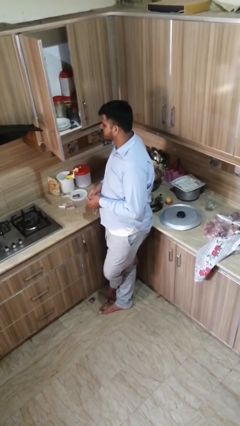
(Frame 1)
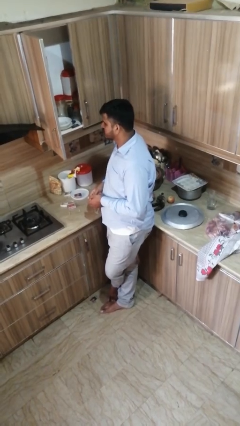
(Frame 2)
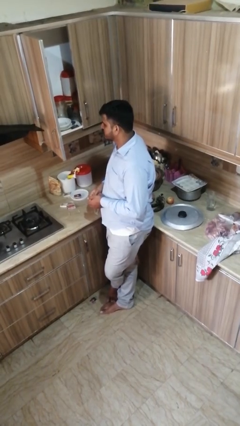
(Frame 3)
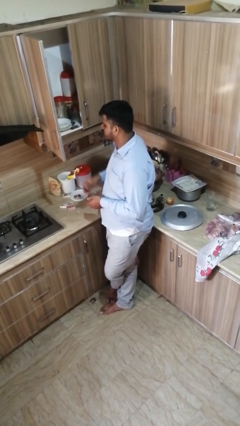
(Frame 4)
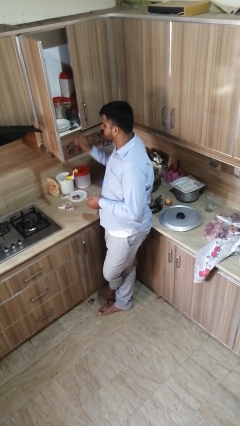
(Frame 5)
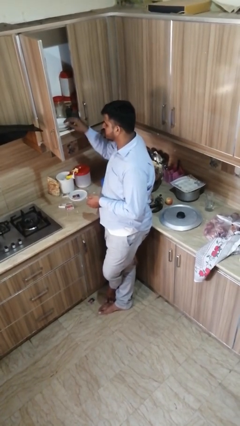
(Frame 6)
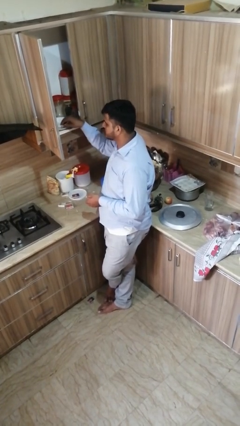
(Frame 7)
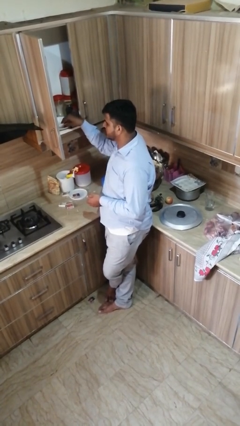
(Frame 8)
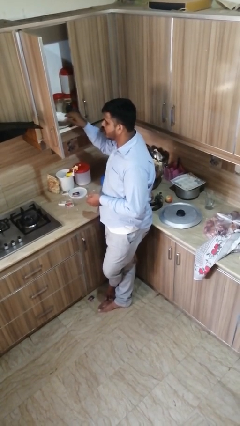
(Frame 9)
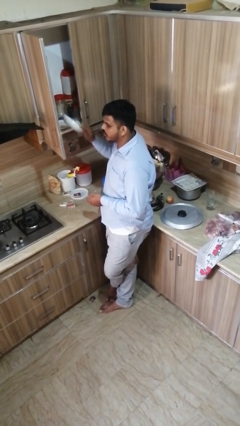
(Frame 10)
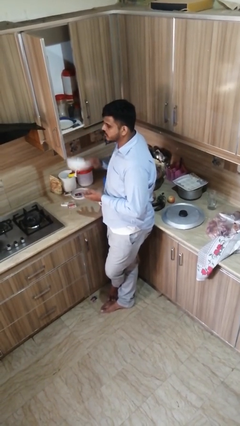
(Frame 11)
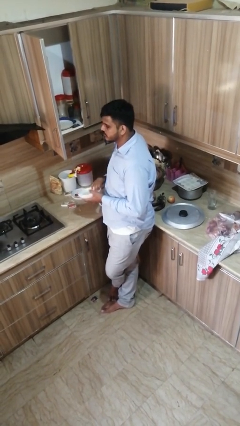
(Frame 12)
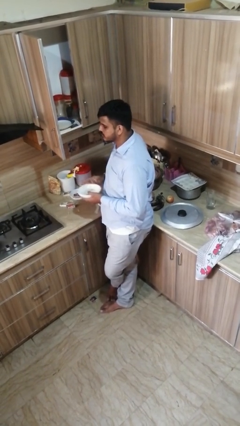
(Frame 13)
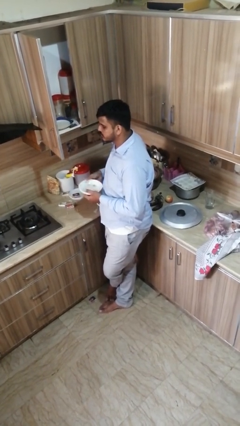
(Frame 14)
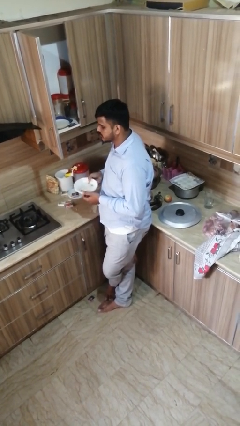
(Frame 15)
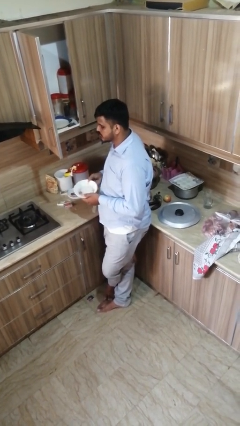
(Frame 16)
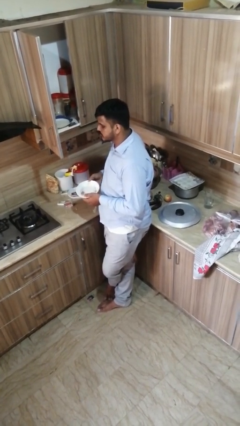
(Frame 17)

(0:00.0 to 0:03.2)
person takes object from cabinet

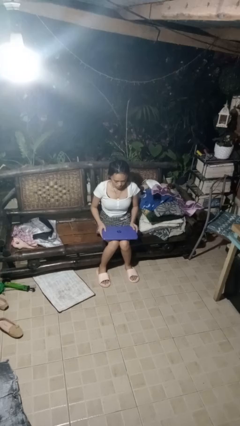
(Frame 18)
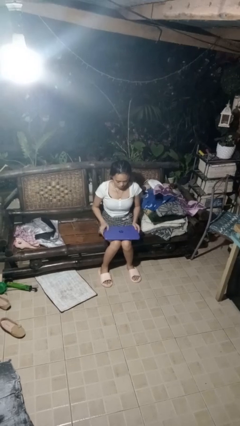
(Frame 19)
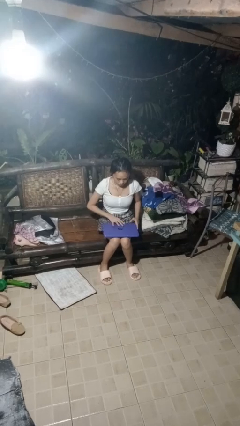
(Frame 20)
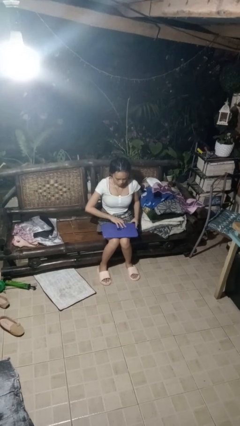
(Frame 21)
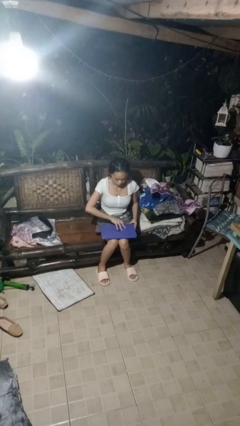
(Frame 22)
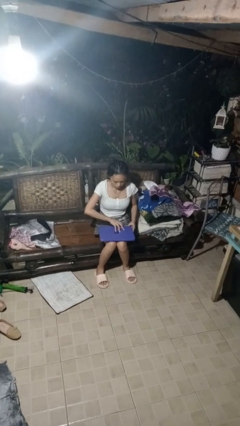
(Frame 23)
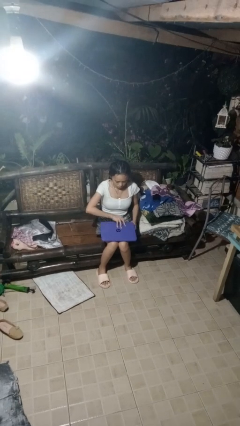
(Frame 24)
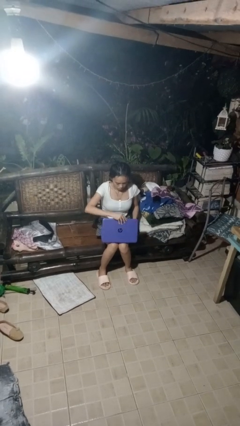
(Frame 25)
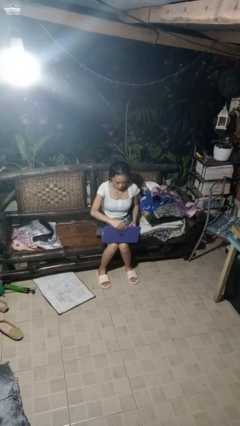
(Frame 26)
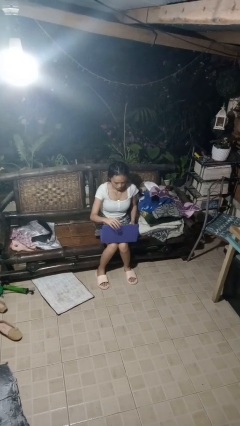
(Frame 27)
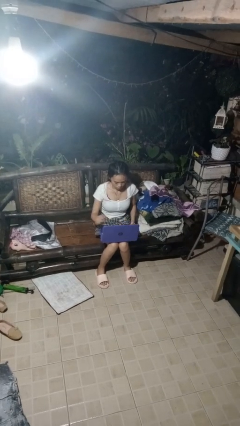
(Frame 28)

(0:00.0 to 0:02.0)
person opens laptop

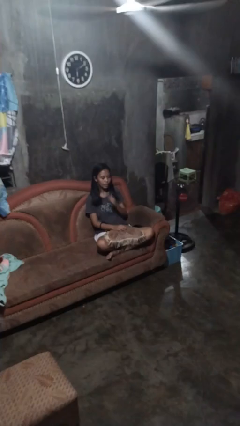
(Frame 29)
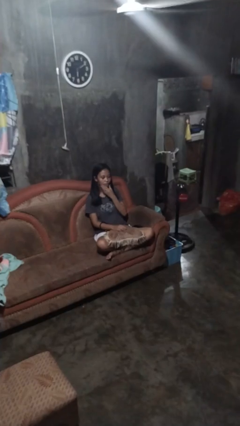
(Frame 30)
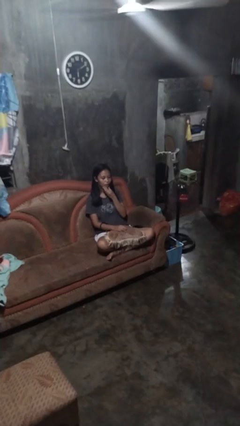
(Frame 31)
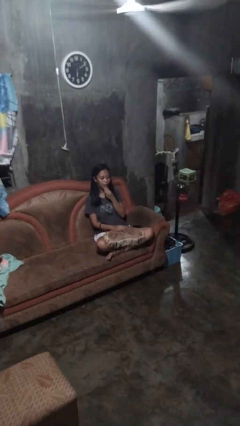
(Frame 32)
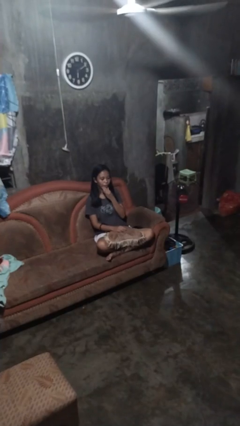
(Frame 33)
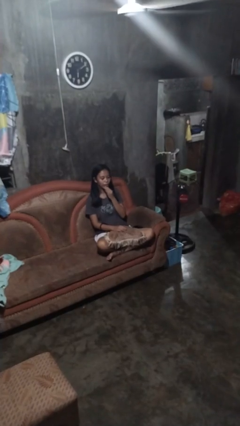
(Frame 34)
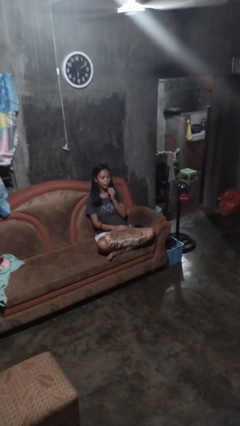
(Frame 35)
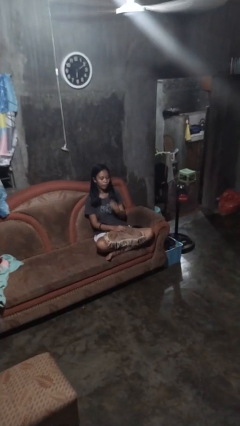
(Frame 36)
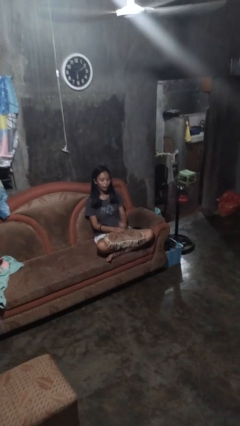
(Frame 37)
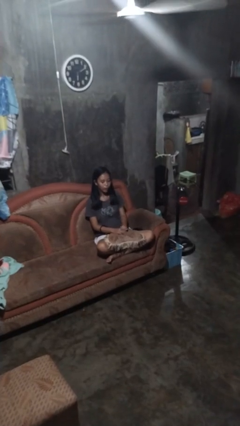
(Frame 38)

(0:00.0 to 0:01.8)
person strokes chin

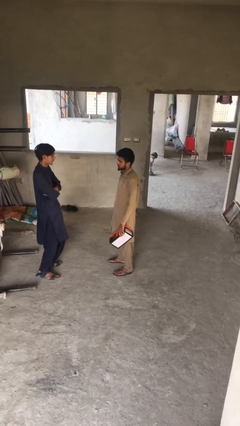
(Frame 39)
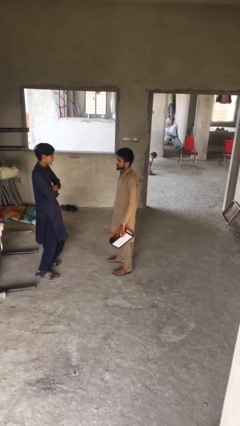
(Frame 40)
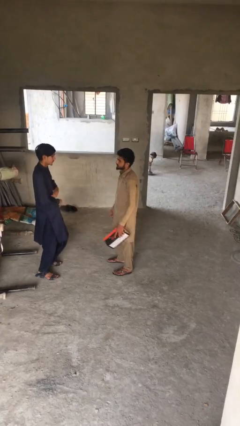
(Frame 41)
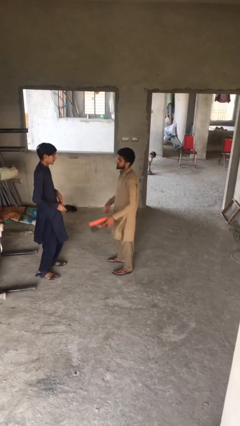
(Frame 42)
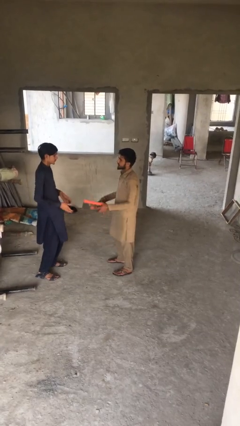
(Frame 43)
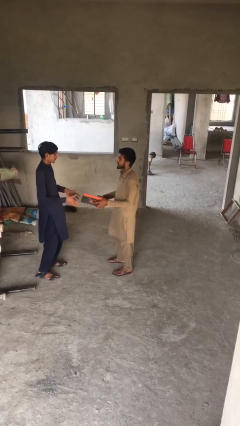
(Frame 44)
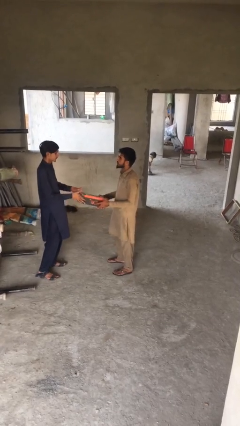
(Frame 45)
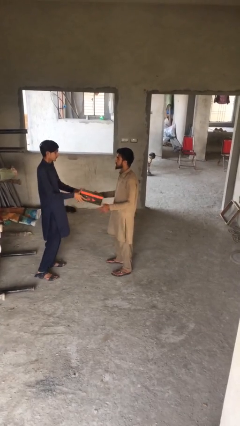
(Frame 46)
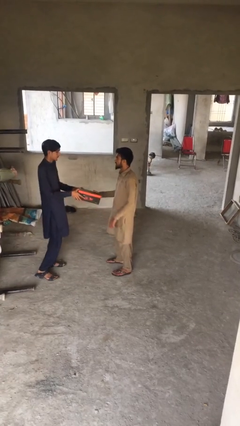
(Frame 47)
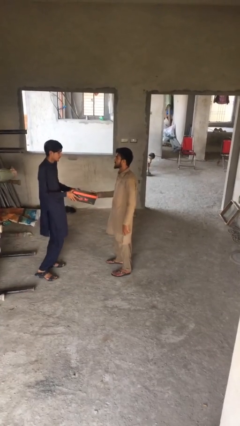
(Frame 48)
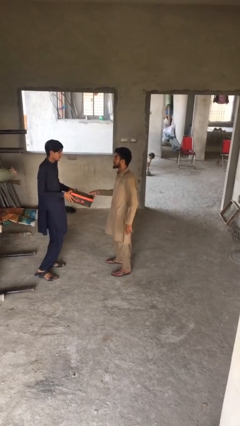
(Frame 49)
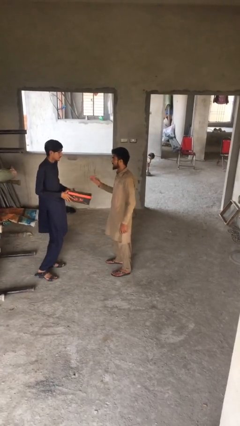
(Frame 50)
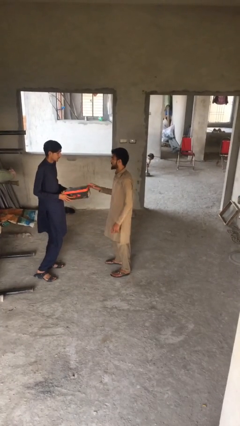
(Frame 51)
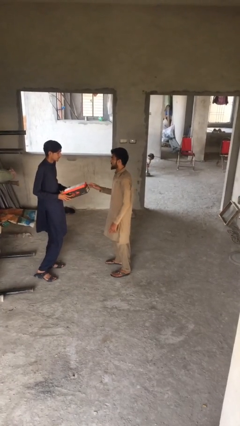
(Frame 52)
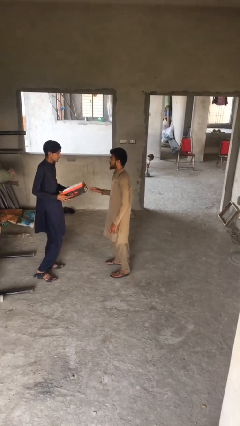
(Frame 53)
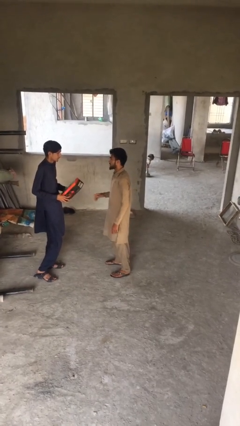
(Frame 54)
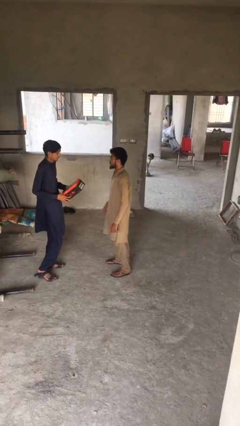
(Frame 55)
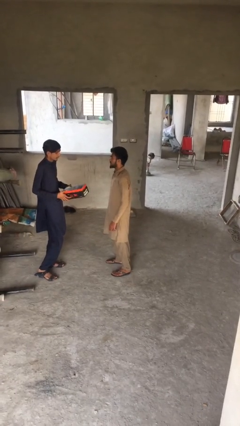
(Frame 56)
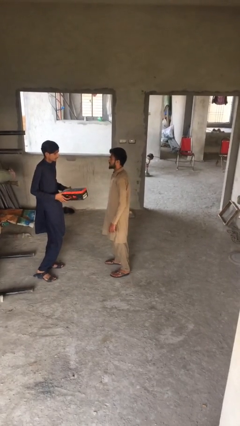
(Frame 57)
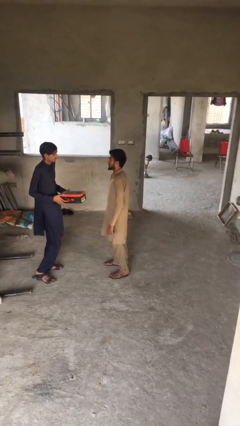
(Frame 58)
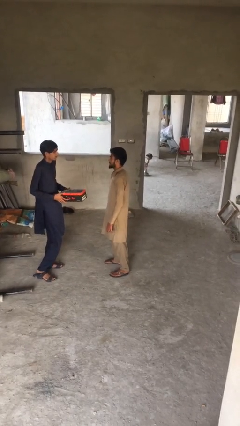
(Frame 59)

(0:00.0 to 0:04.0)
person transfers object to person

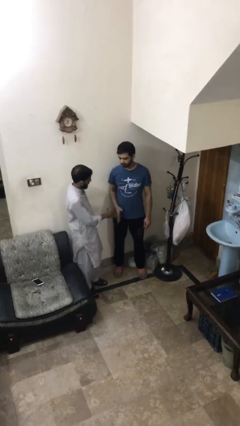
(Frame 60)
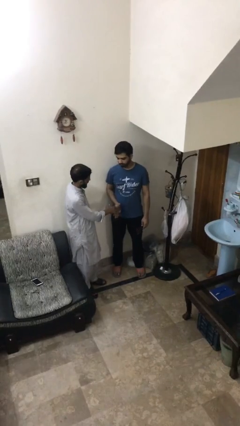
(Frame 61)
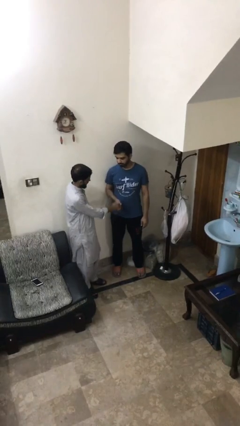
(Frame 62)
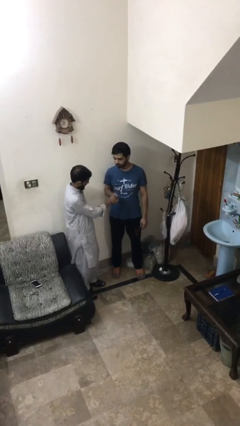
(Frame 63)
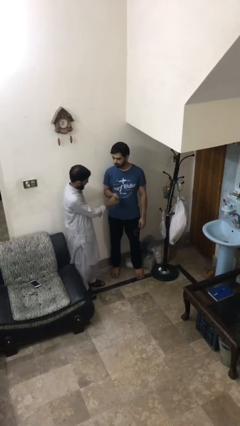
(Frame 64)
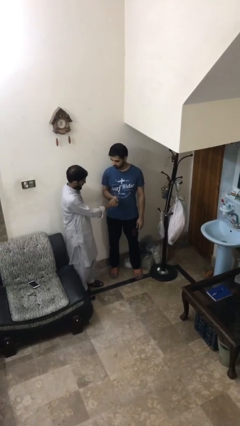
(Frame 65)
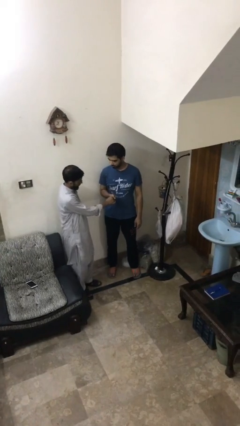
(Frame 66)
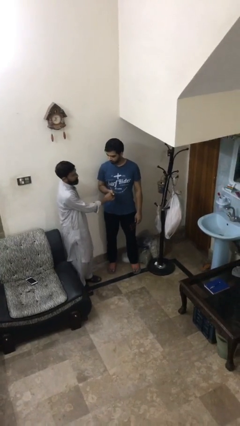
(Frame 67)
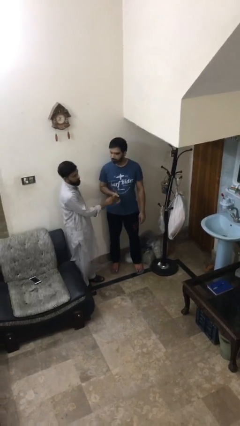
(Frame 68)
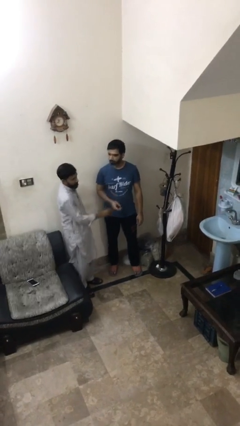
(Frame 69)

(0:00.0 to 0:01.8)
person shakes hand

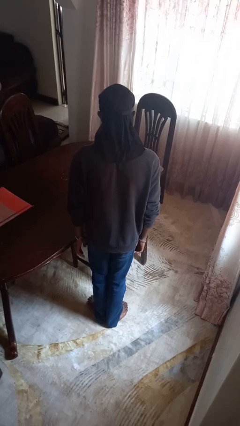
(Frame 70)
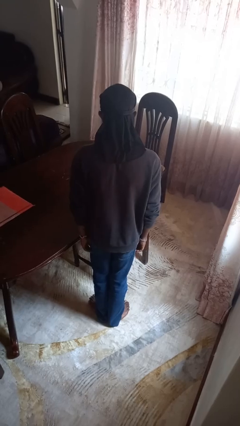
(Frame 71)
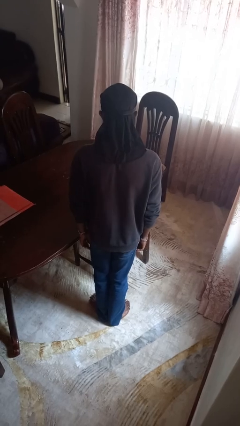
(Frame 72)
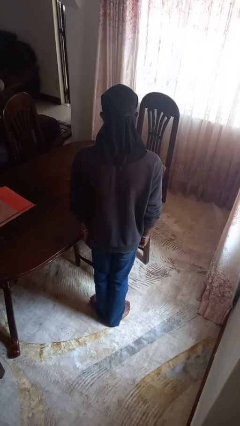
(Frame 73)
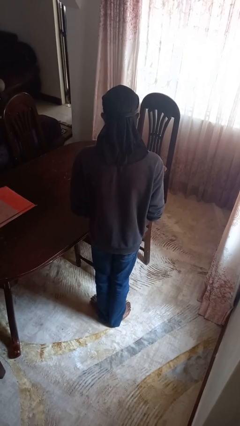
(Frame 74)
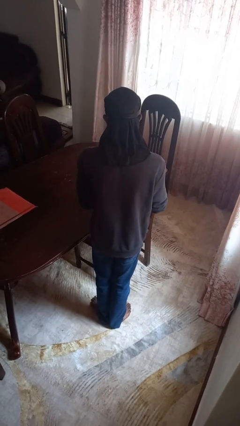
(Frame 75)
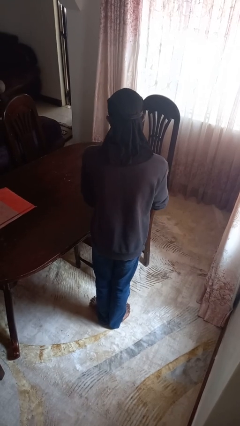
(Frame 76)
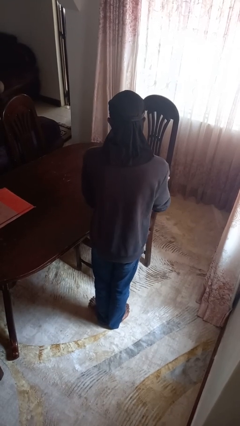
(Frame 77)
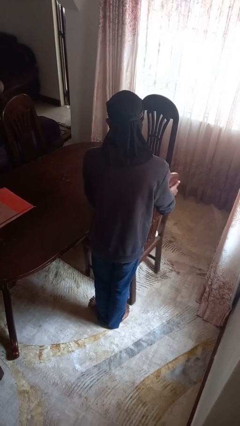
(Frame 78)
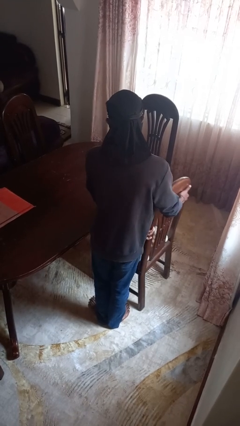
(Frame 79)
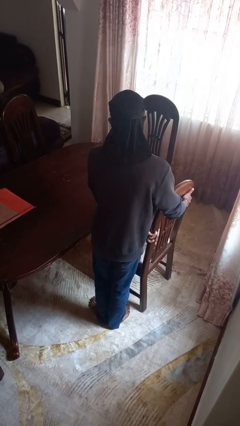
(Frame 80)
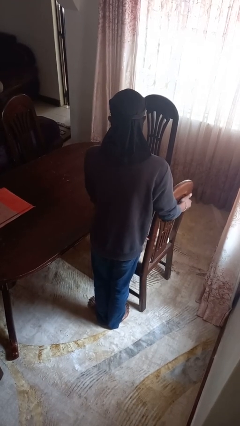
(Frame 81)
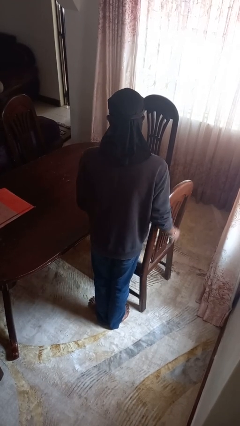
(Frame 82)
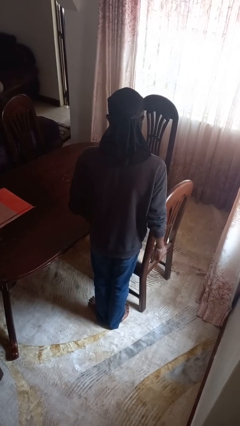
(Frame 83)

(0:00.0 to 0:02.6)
person pulls out chair

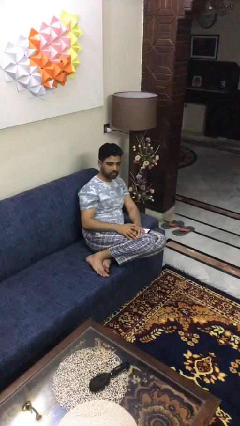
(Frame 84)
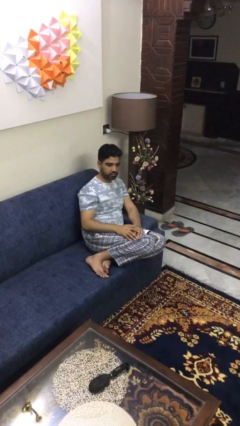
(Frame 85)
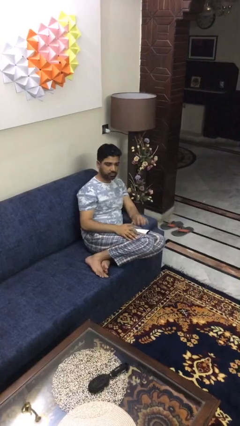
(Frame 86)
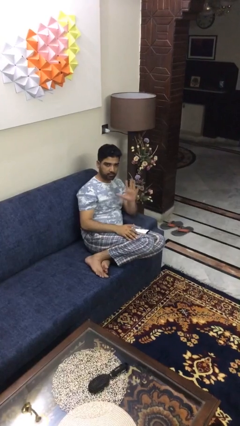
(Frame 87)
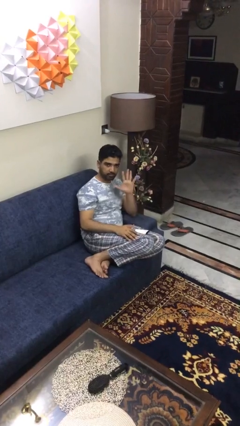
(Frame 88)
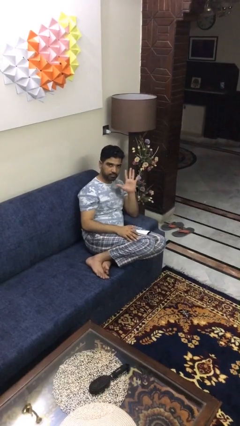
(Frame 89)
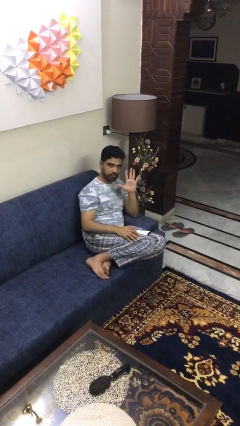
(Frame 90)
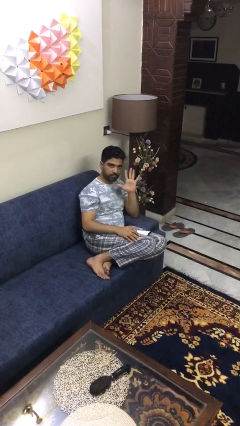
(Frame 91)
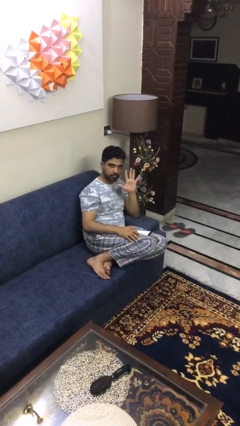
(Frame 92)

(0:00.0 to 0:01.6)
person gestures number five
